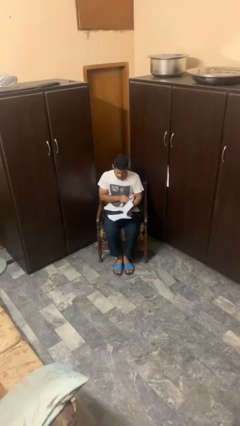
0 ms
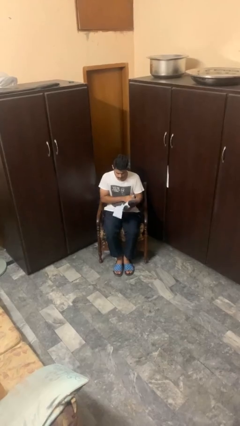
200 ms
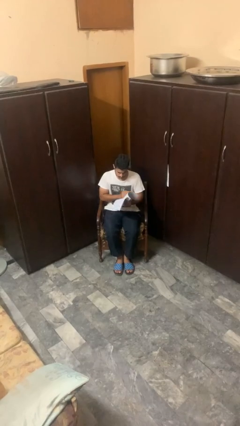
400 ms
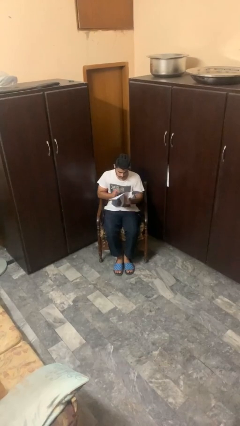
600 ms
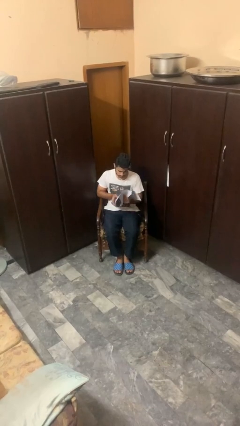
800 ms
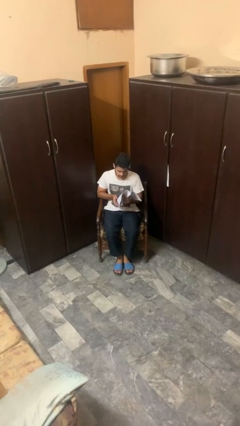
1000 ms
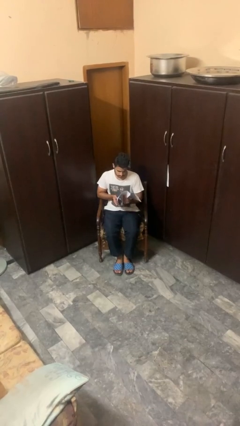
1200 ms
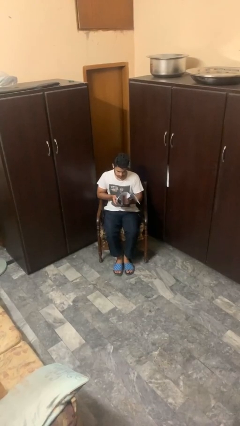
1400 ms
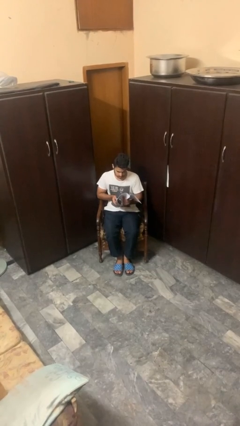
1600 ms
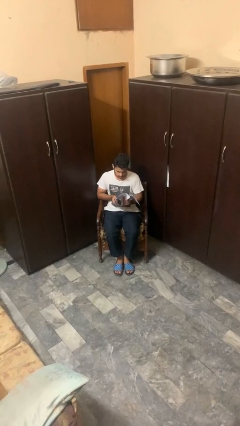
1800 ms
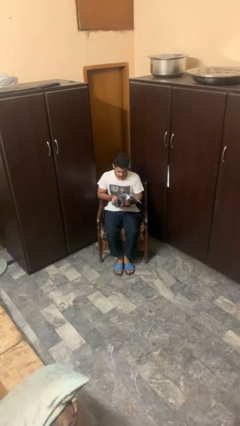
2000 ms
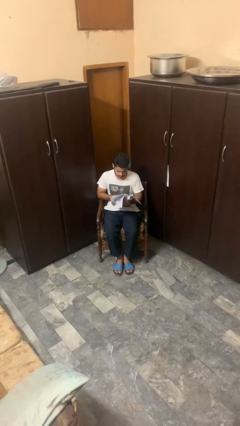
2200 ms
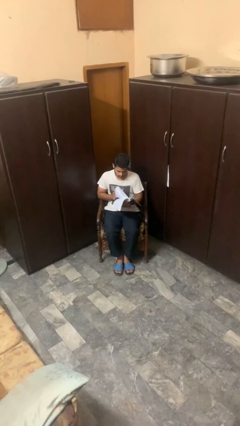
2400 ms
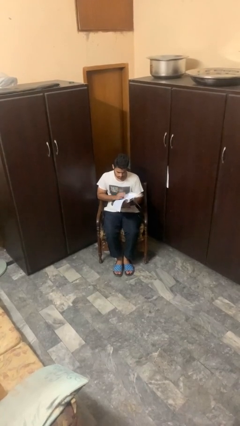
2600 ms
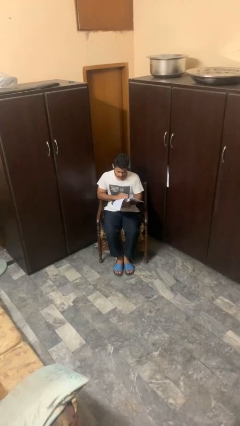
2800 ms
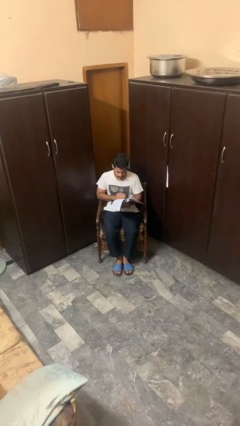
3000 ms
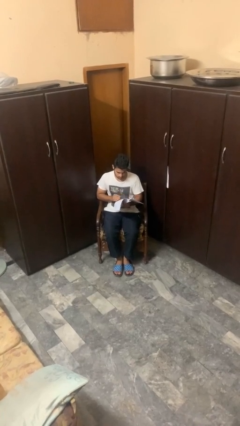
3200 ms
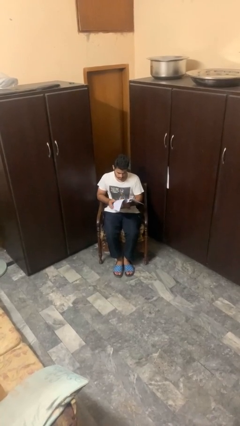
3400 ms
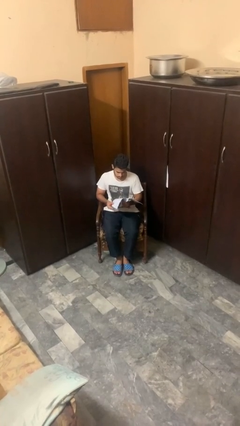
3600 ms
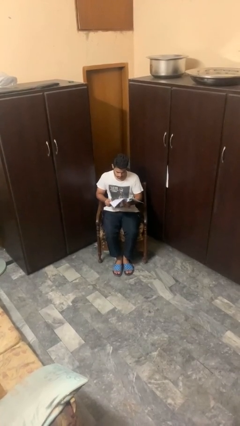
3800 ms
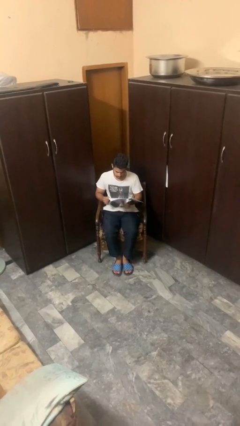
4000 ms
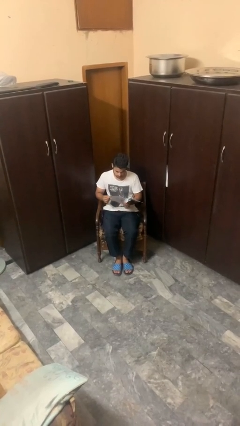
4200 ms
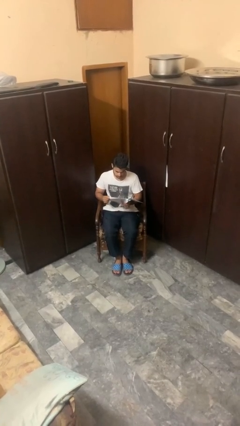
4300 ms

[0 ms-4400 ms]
person reads magazine

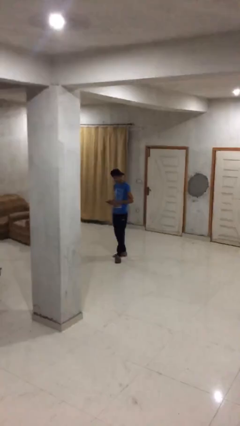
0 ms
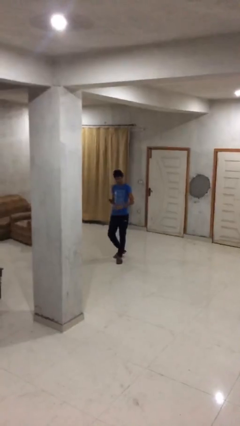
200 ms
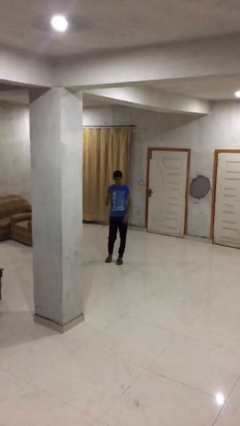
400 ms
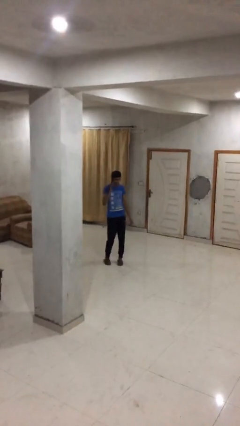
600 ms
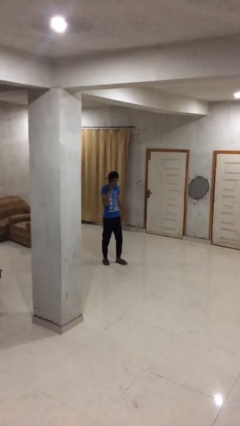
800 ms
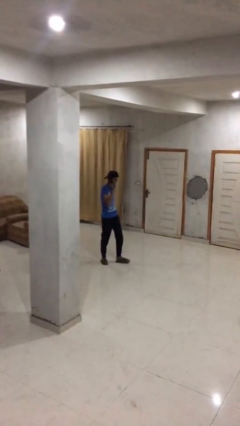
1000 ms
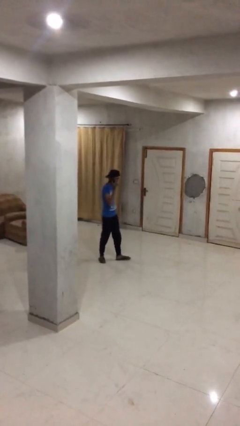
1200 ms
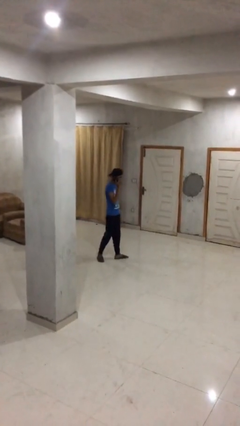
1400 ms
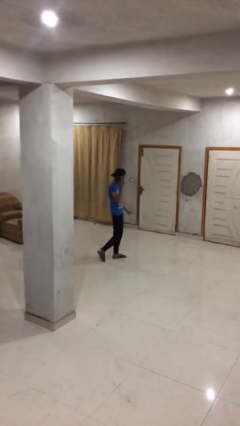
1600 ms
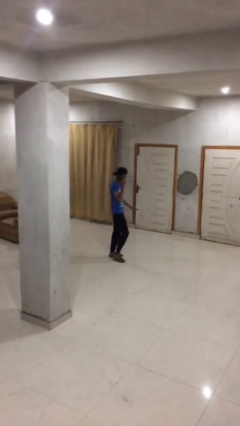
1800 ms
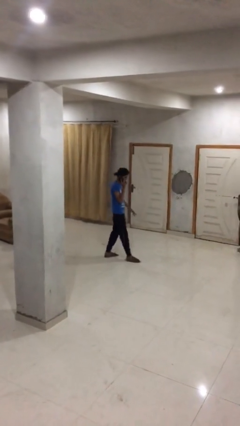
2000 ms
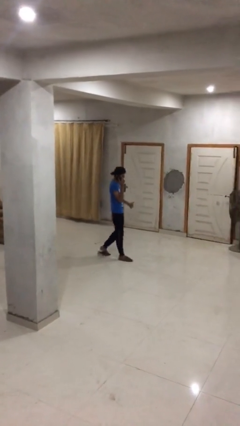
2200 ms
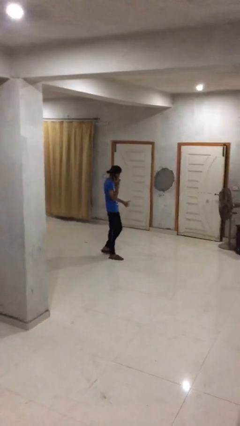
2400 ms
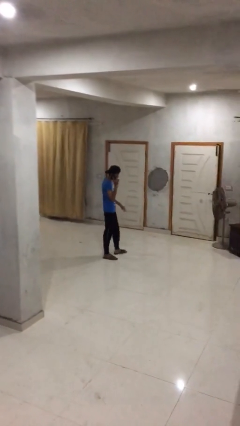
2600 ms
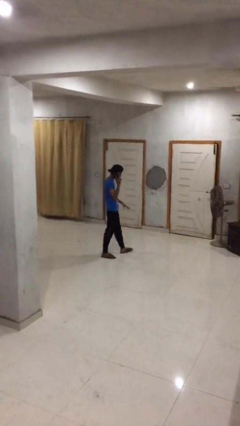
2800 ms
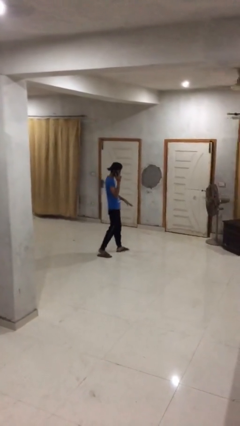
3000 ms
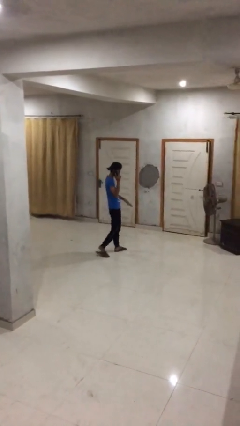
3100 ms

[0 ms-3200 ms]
person talks on phone

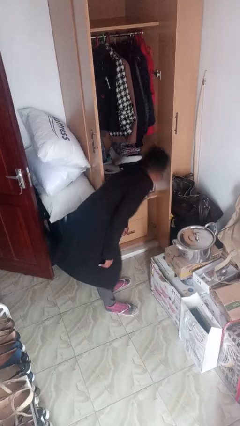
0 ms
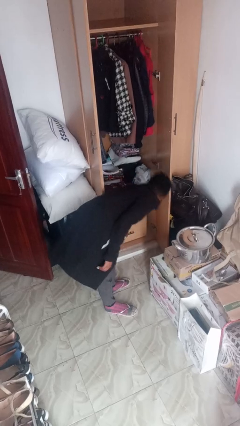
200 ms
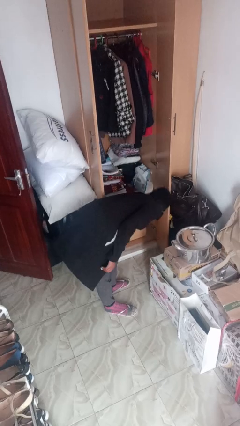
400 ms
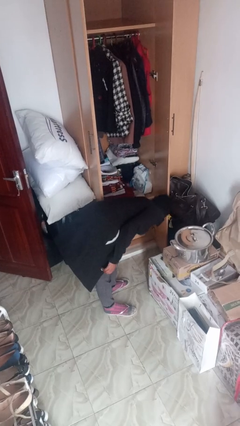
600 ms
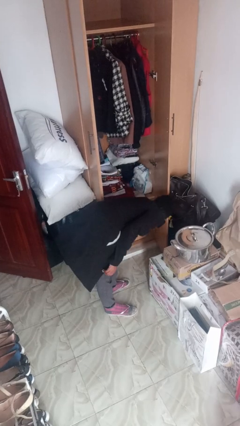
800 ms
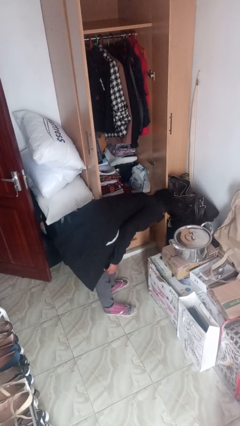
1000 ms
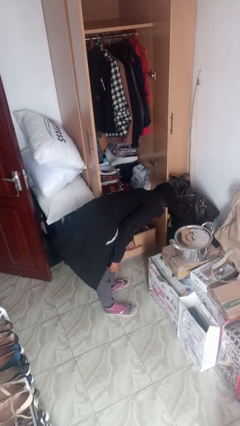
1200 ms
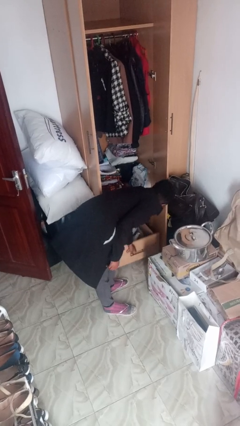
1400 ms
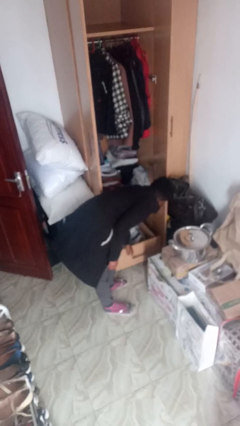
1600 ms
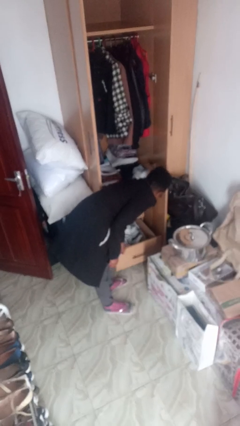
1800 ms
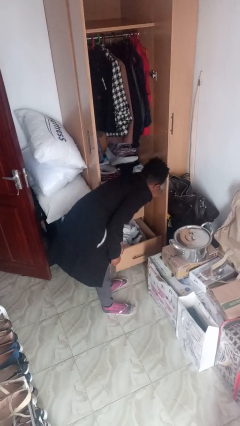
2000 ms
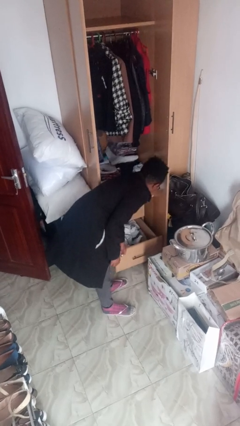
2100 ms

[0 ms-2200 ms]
person opens dresser drawer

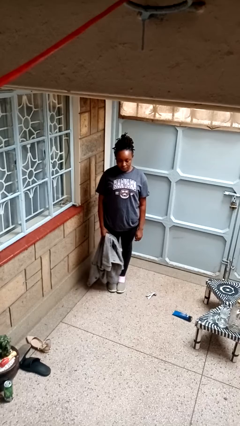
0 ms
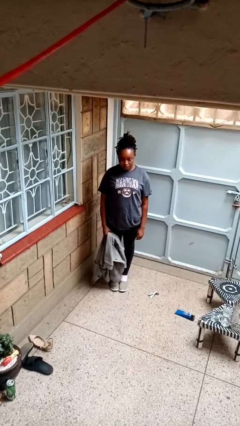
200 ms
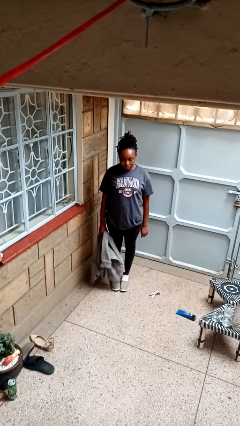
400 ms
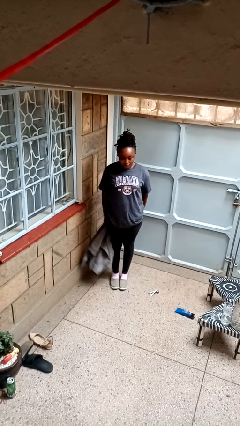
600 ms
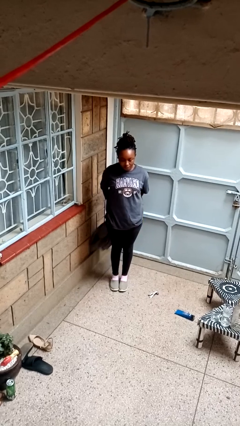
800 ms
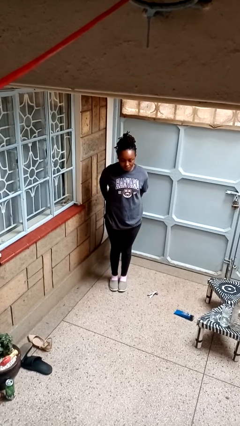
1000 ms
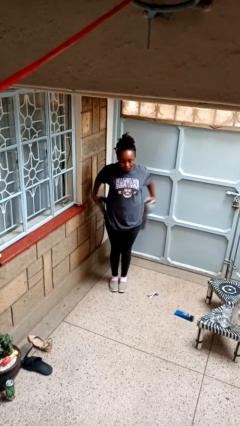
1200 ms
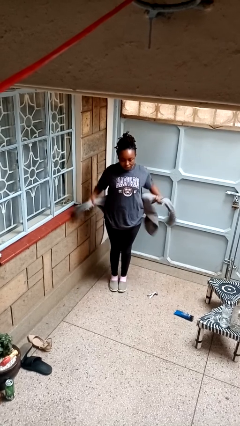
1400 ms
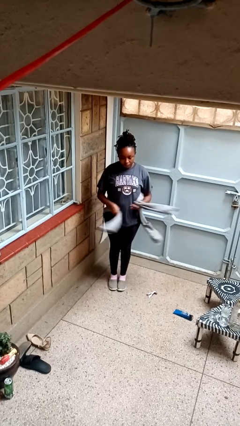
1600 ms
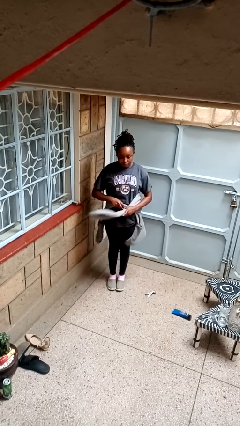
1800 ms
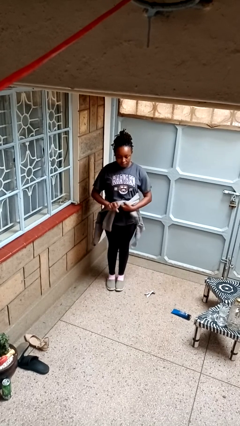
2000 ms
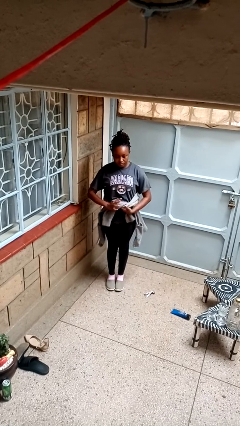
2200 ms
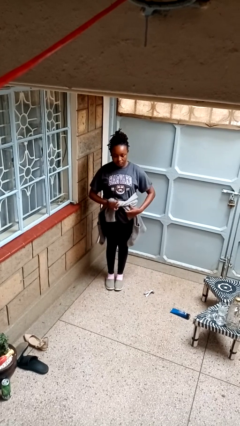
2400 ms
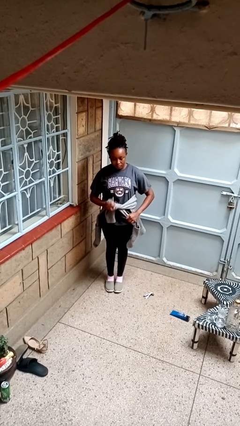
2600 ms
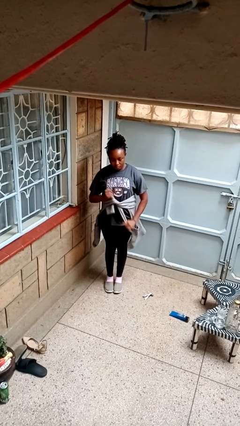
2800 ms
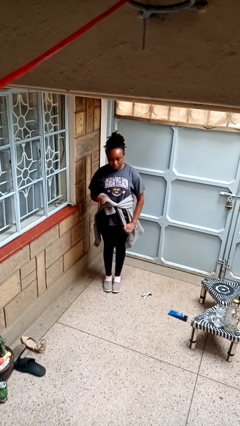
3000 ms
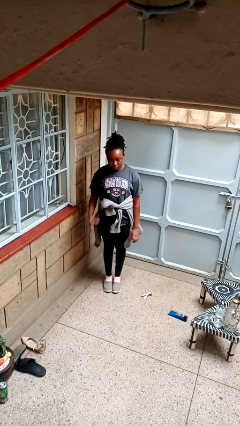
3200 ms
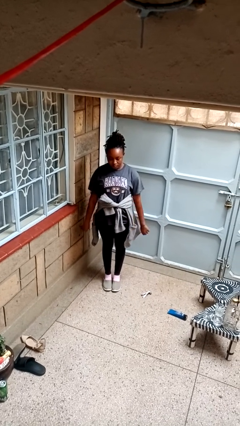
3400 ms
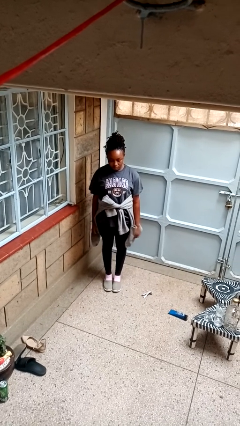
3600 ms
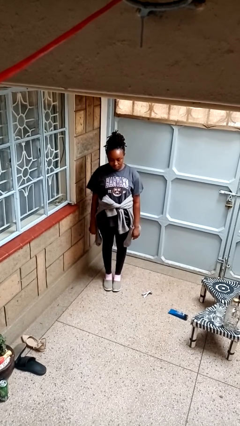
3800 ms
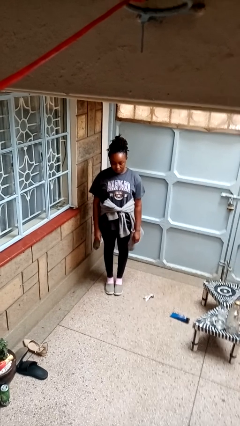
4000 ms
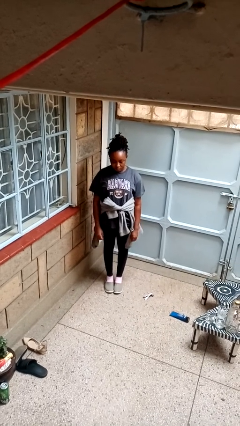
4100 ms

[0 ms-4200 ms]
person ties jacket around waist

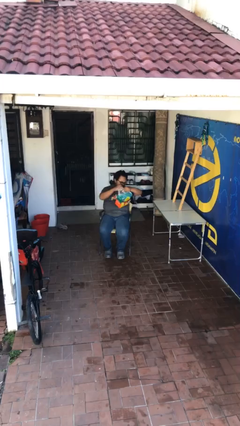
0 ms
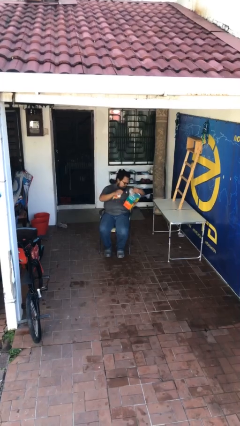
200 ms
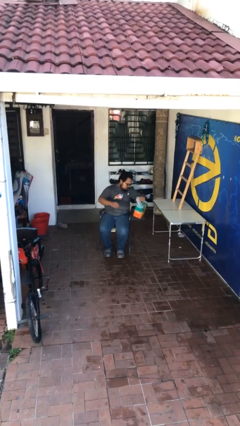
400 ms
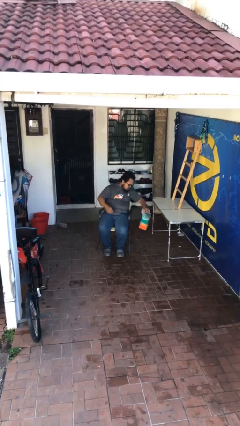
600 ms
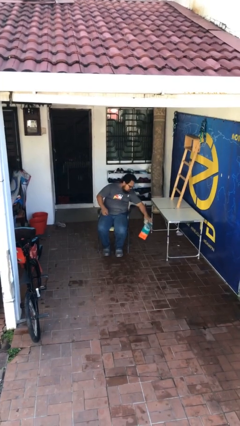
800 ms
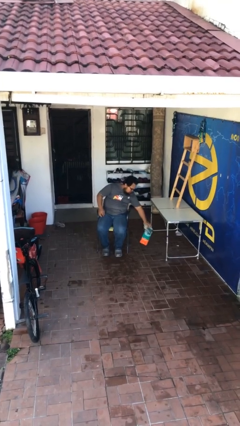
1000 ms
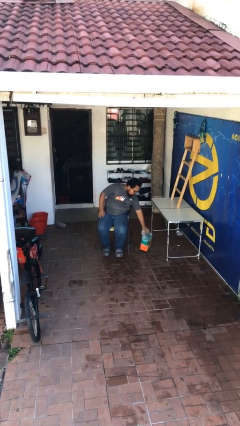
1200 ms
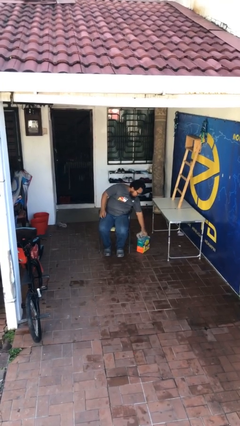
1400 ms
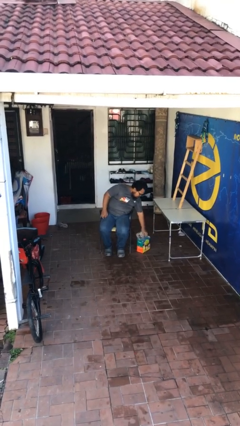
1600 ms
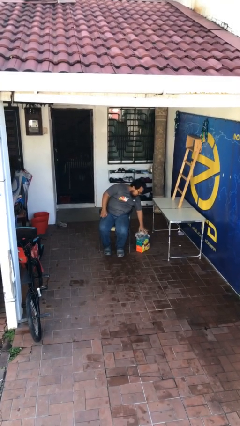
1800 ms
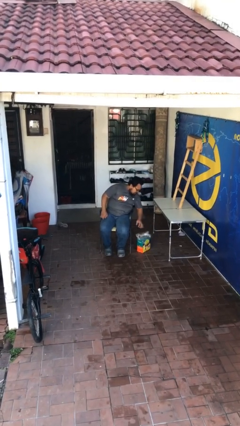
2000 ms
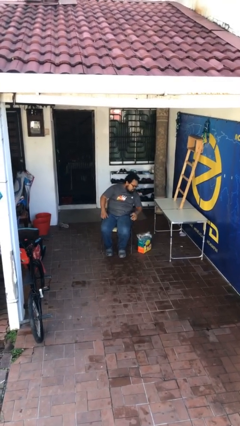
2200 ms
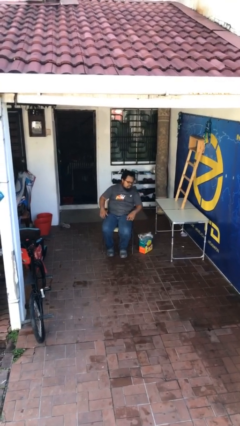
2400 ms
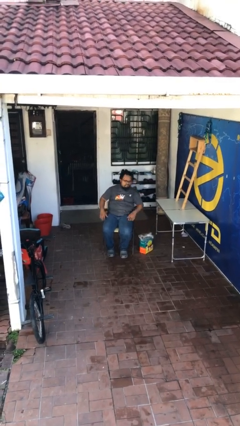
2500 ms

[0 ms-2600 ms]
person puts down object on floor

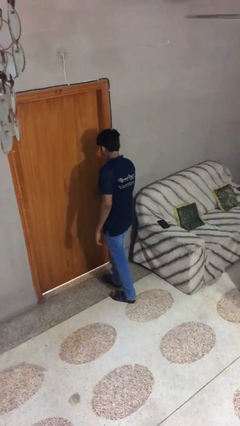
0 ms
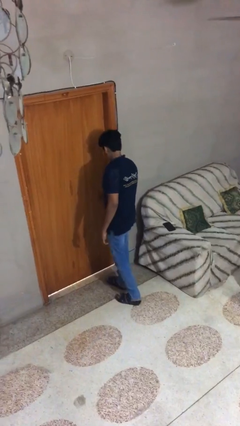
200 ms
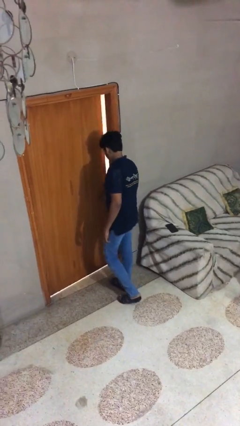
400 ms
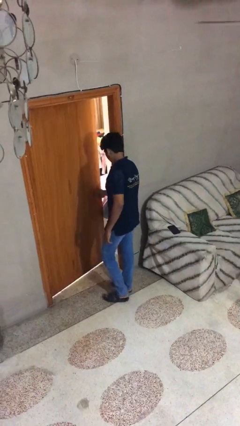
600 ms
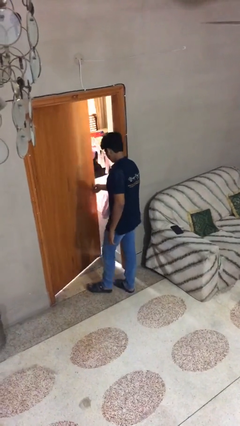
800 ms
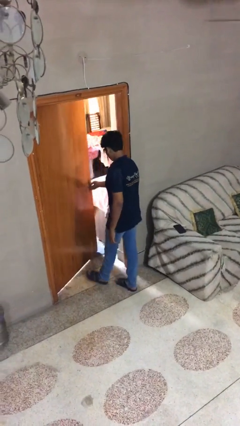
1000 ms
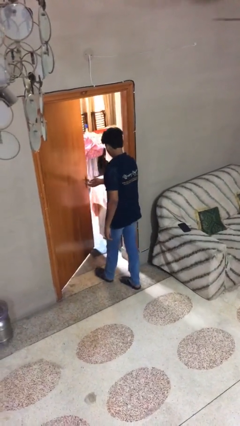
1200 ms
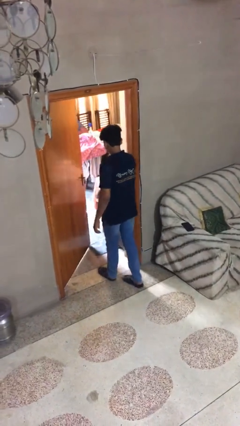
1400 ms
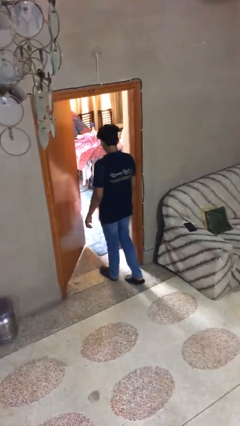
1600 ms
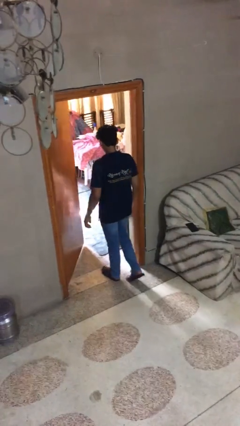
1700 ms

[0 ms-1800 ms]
person opens facility door
